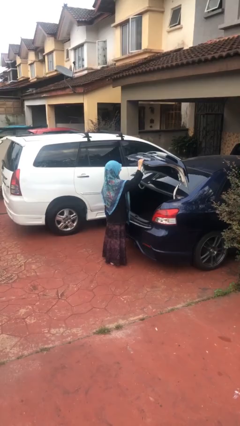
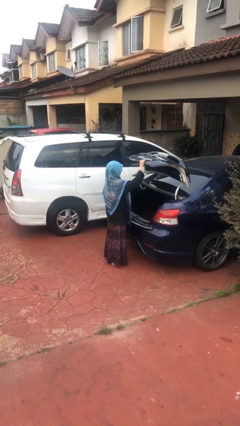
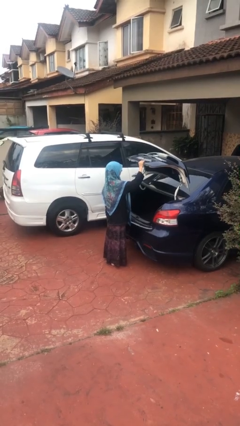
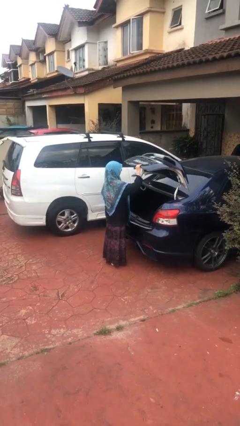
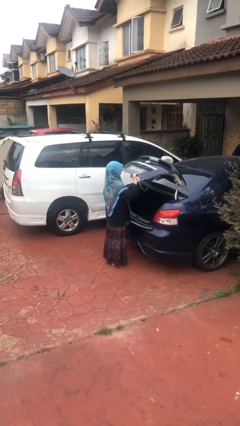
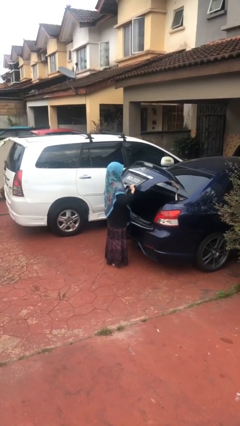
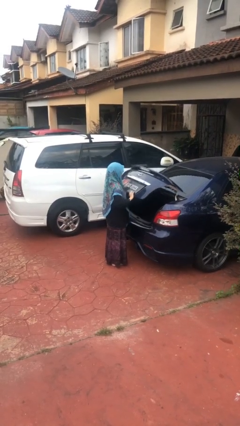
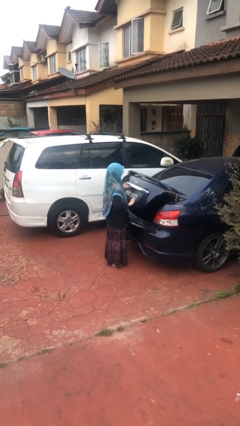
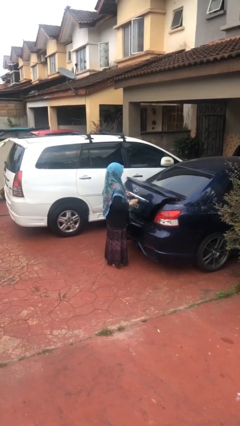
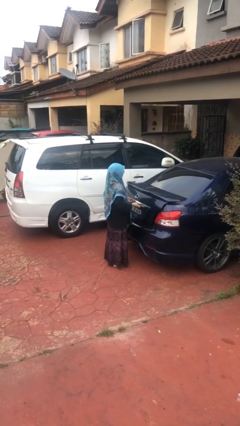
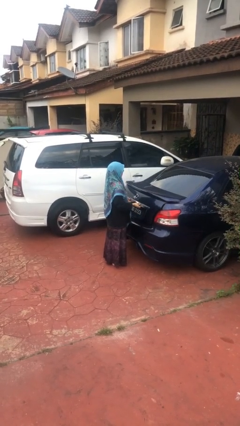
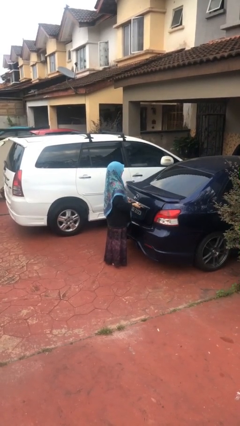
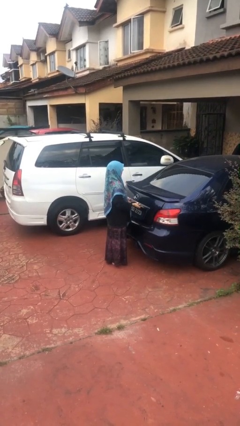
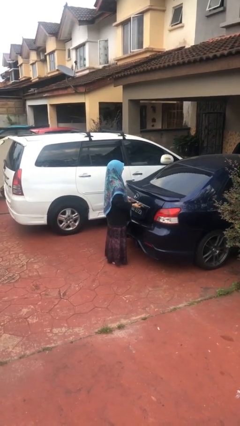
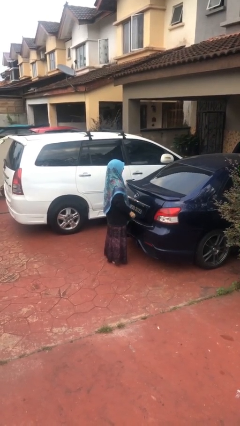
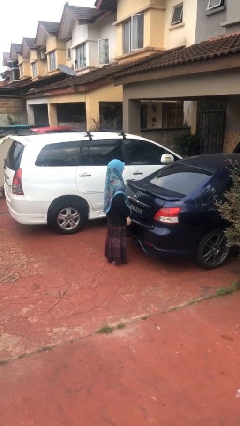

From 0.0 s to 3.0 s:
person closes car trunk

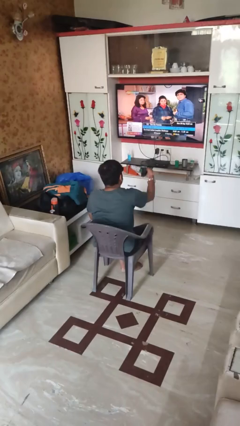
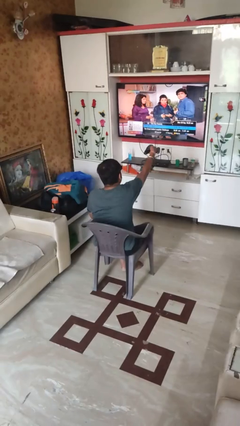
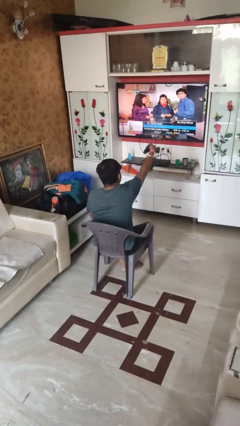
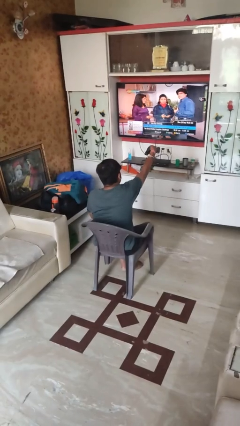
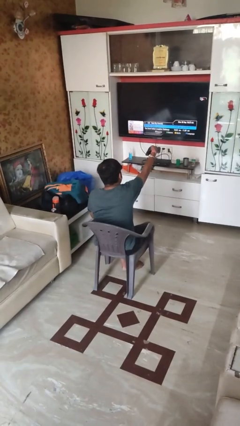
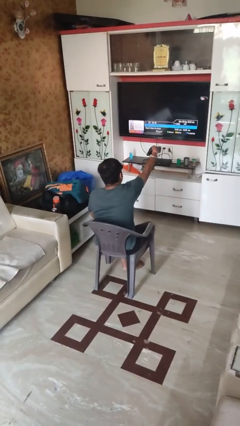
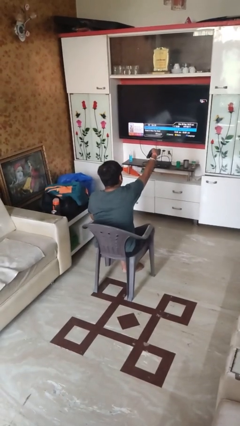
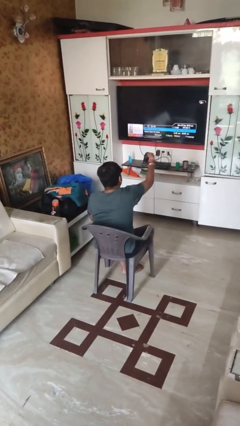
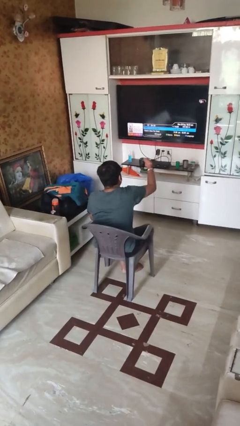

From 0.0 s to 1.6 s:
person uses television remote

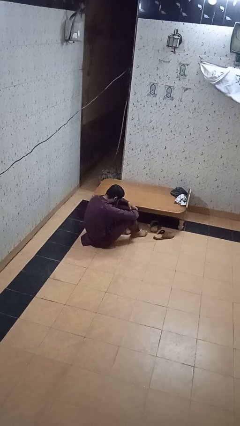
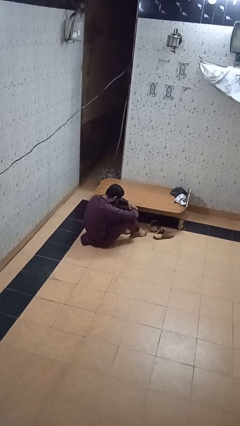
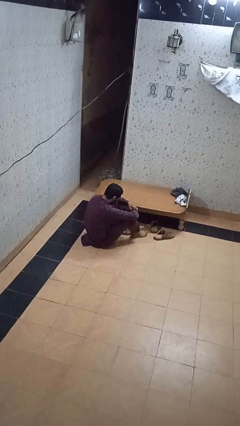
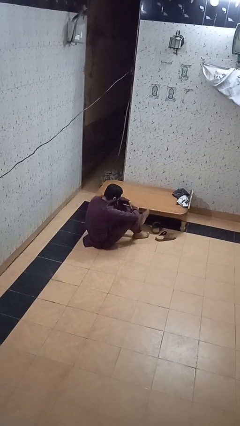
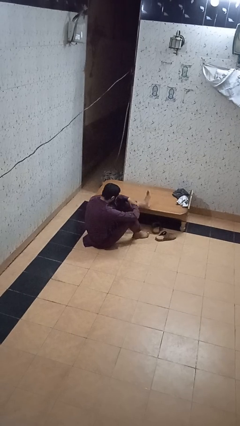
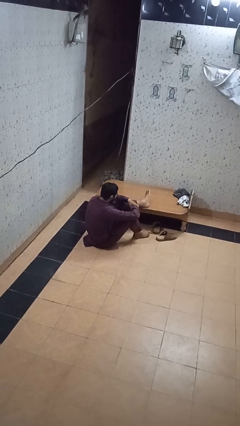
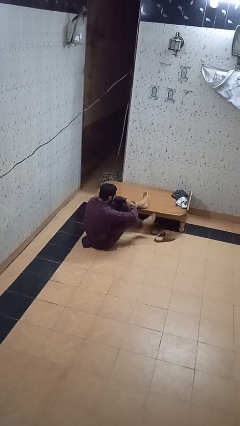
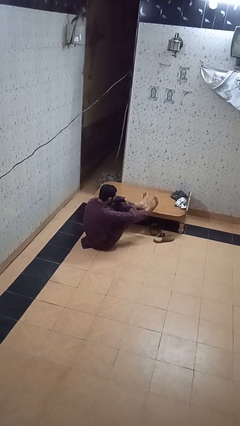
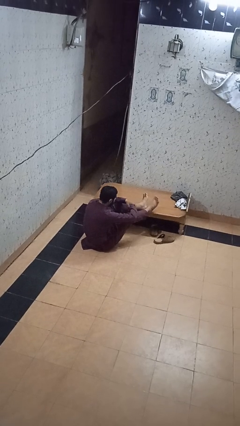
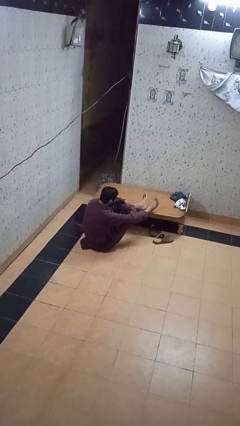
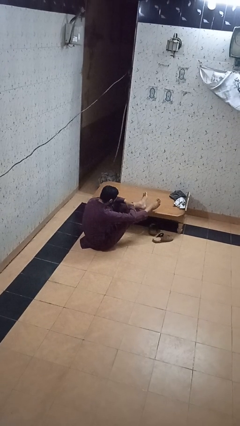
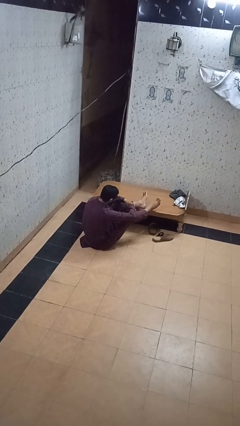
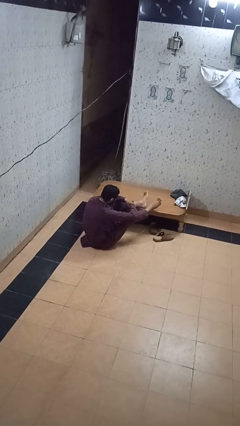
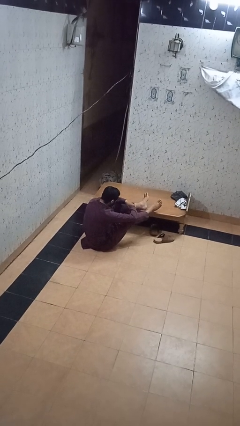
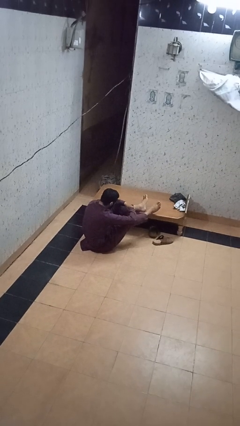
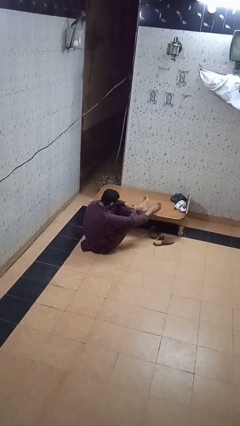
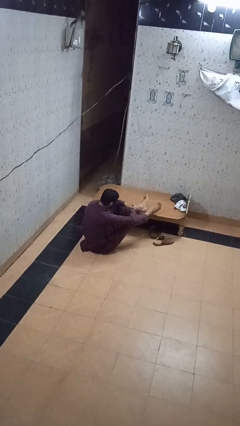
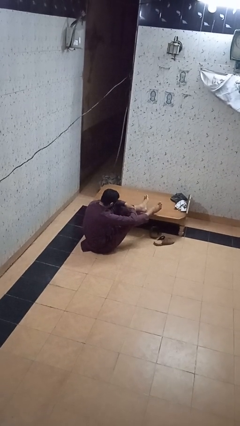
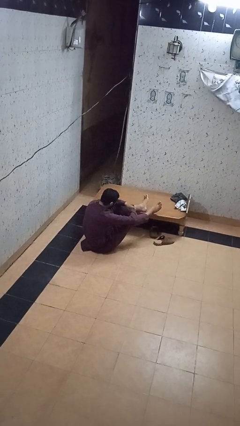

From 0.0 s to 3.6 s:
person puts feet up

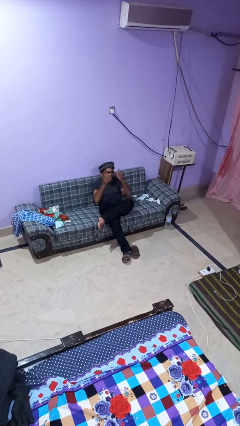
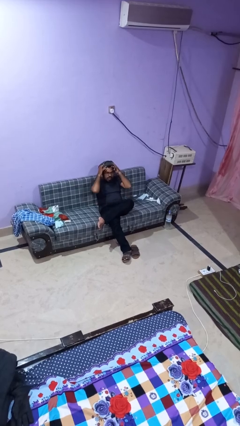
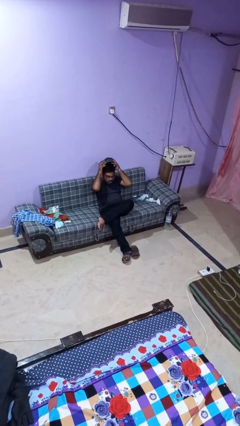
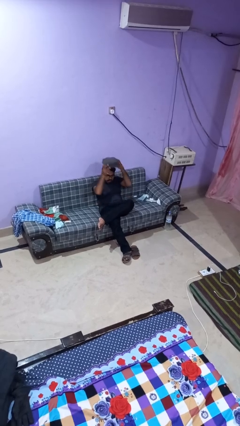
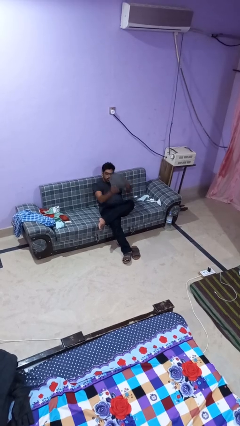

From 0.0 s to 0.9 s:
person takes off hat

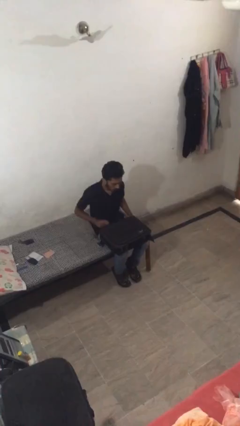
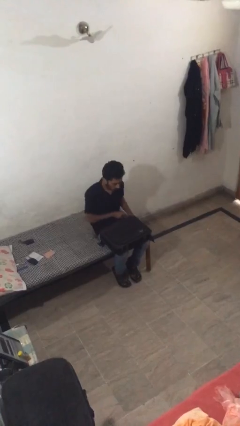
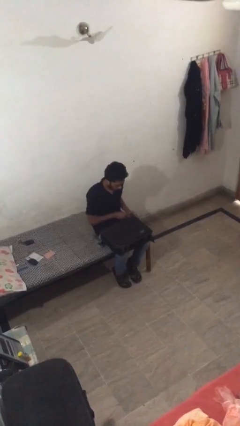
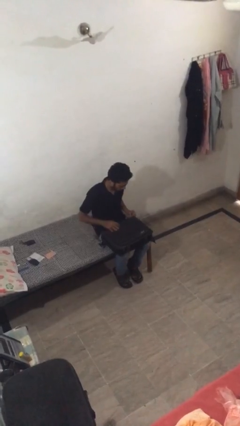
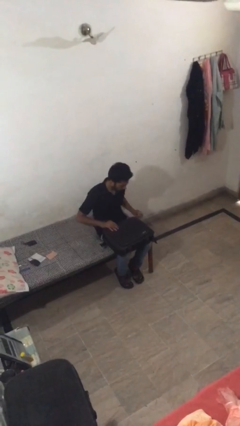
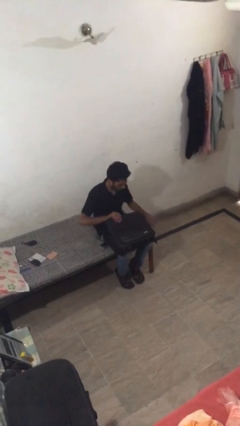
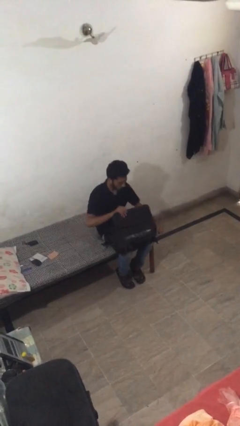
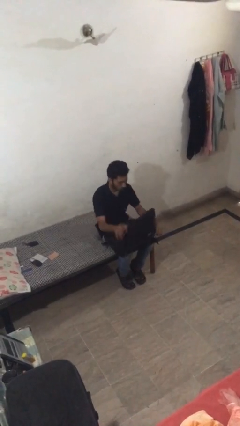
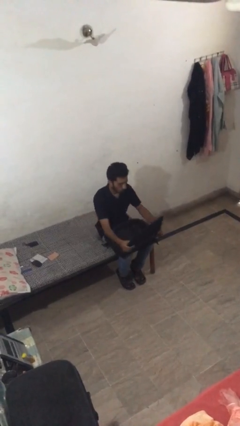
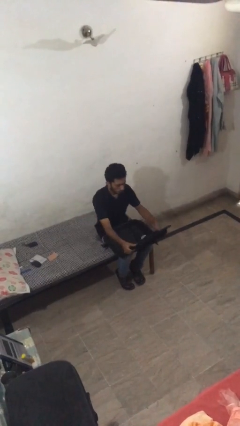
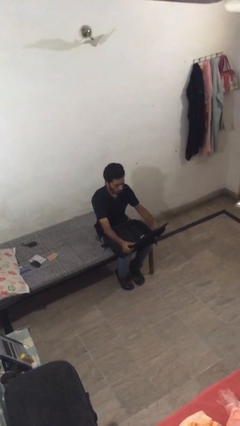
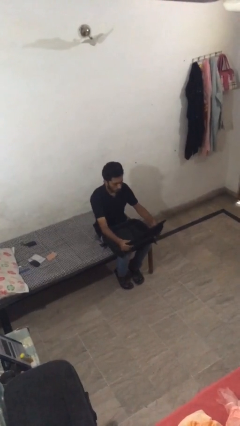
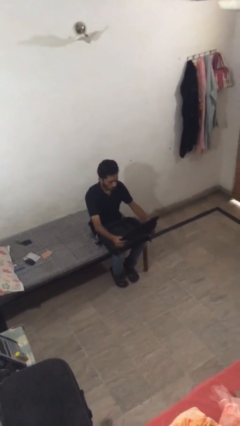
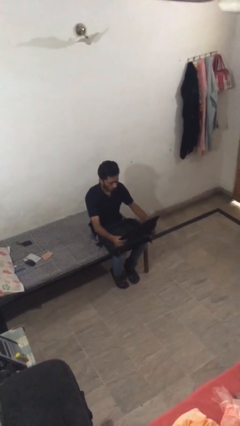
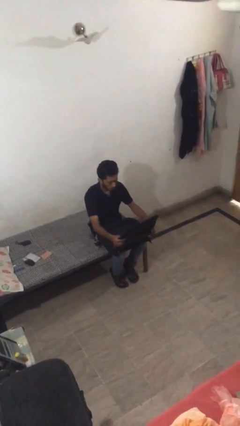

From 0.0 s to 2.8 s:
person opens suitcase

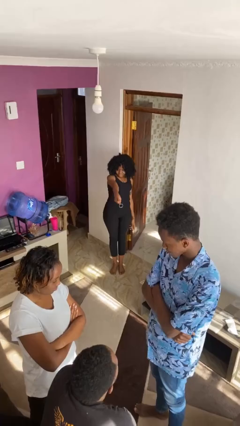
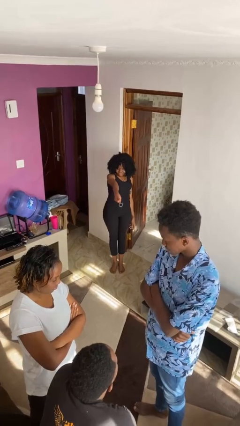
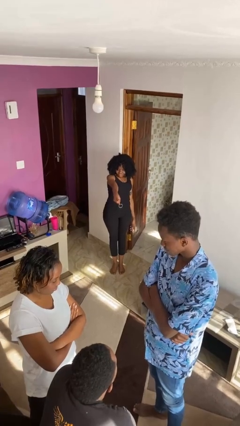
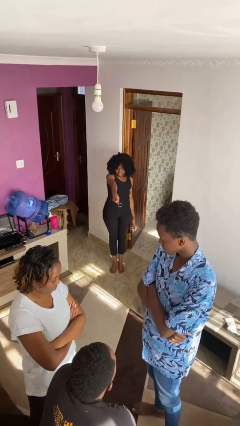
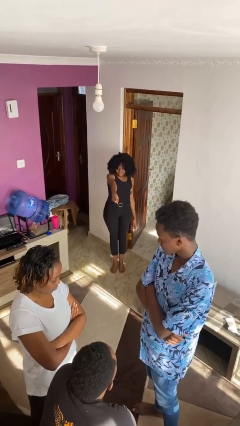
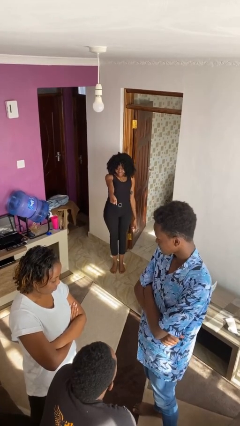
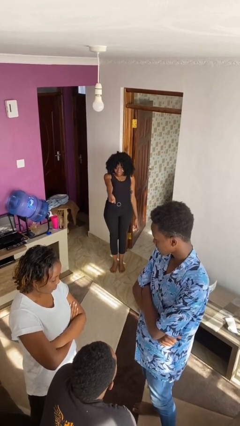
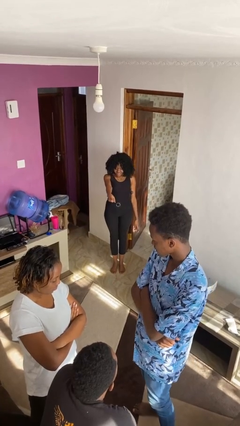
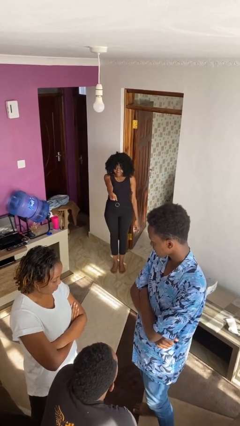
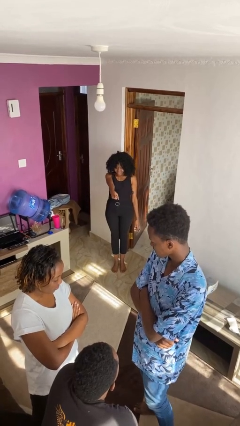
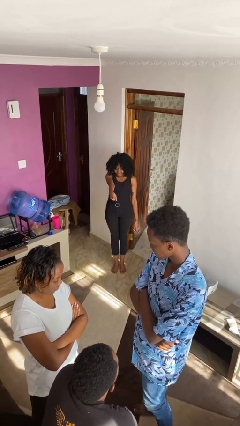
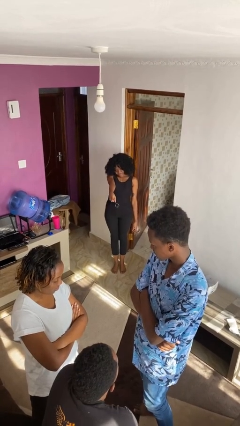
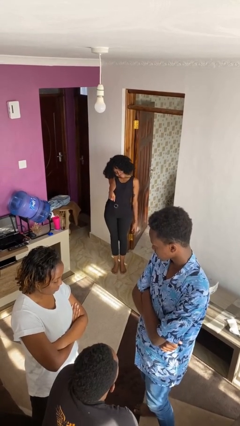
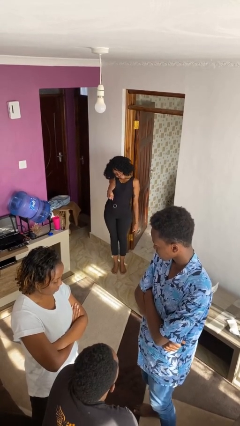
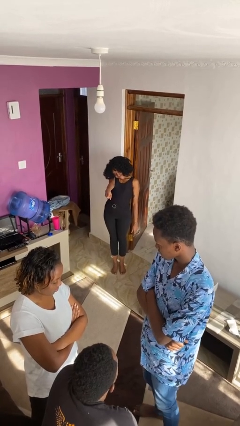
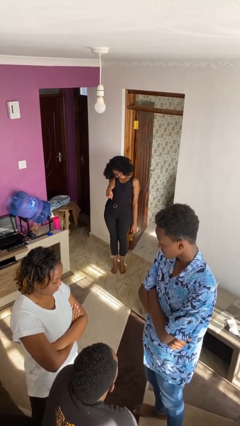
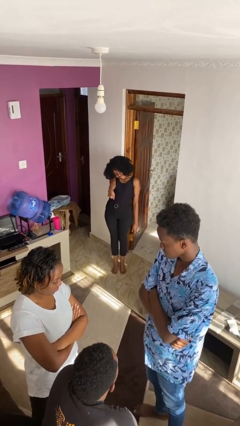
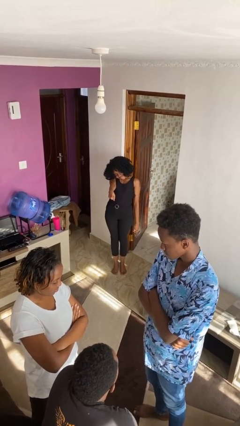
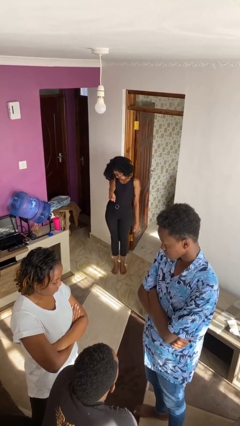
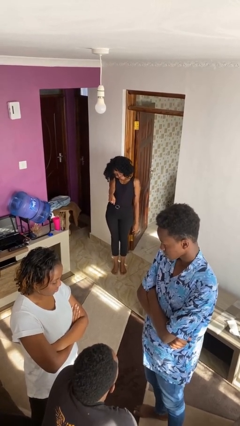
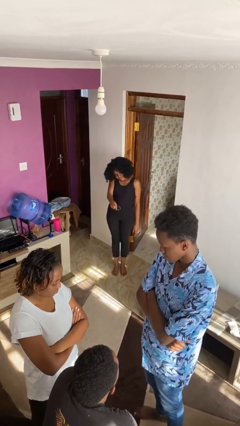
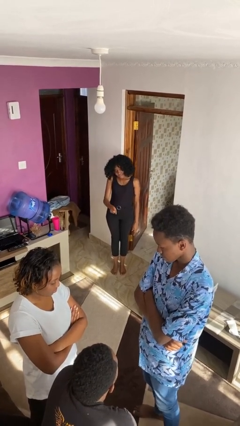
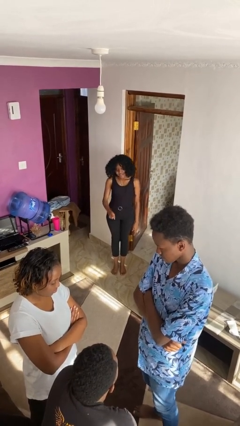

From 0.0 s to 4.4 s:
person points at person

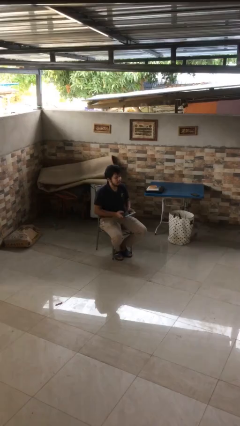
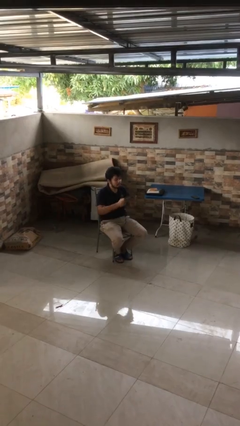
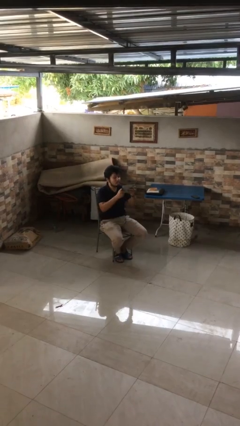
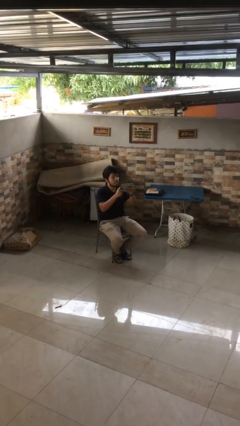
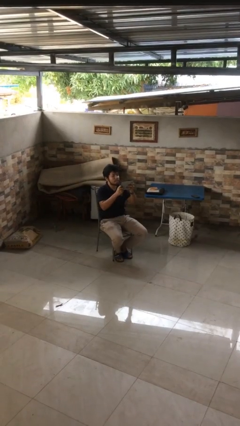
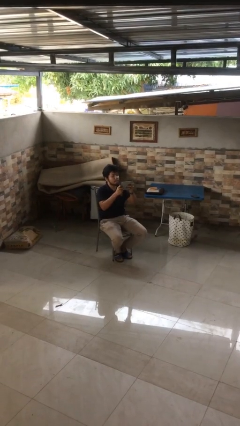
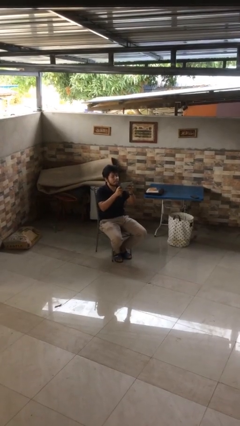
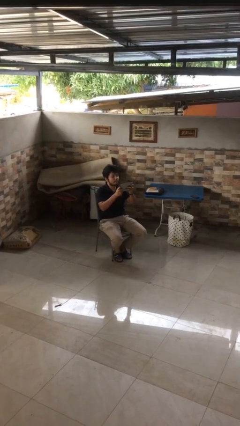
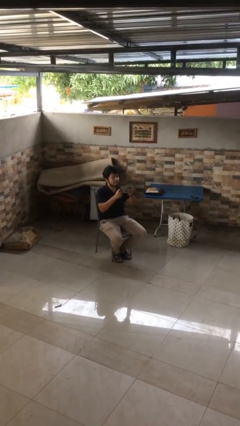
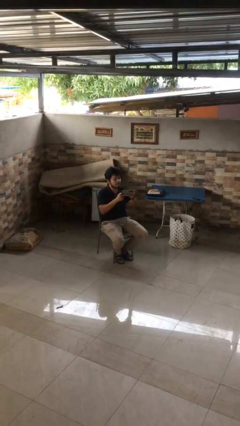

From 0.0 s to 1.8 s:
person interacts with handheld game
